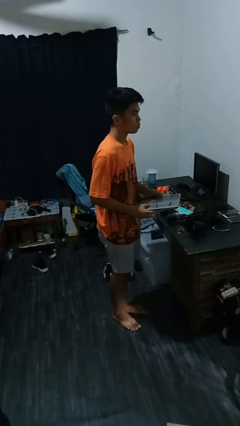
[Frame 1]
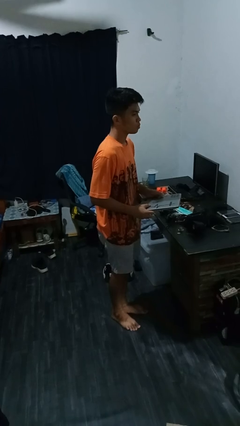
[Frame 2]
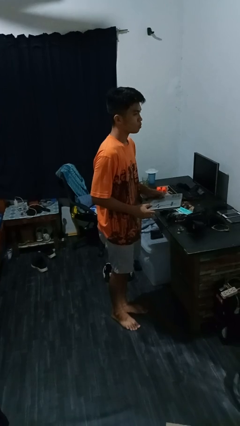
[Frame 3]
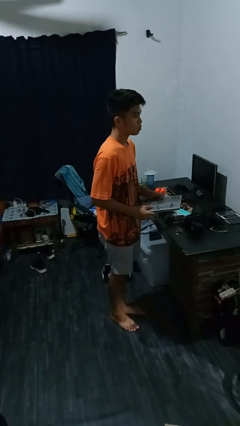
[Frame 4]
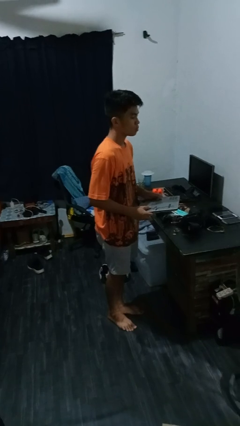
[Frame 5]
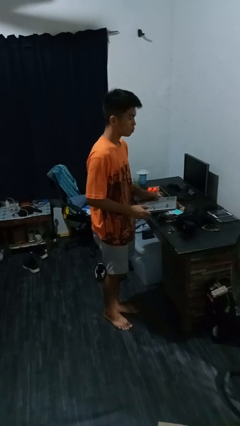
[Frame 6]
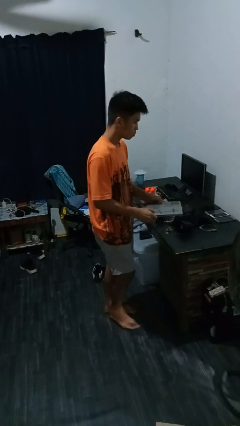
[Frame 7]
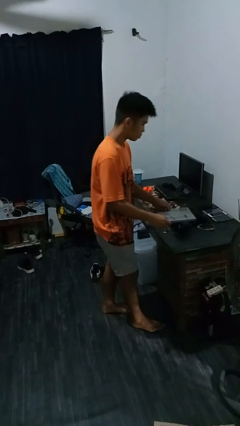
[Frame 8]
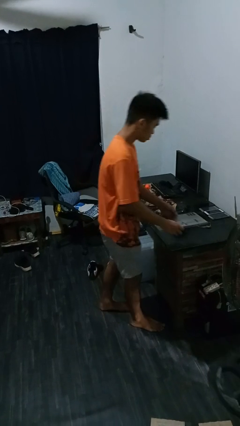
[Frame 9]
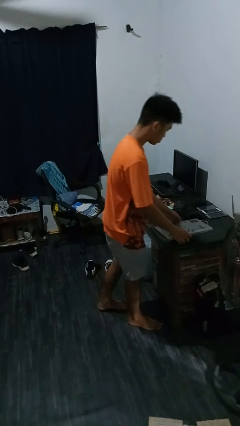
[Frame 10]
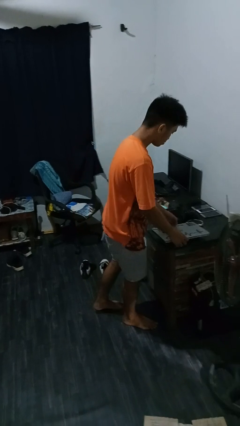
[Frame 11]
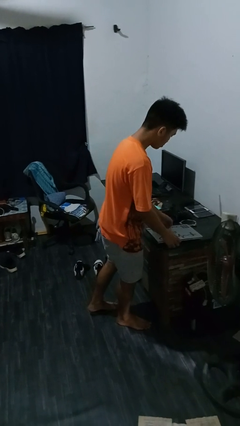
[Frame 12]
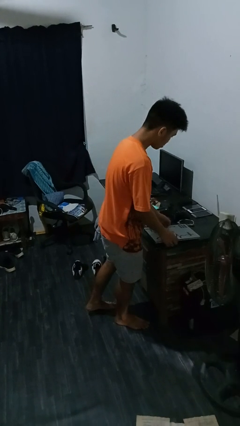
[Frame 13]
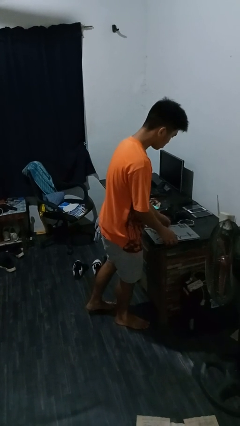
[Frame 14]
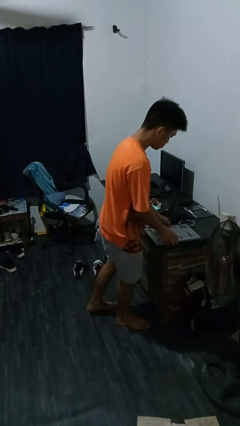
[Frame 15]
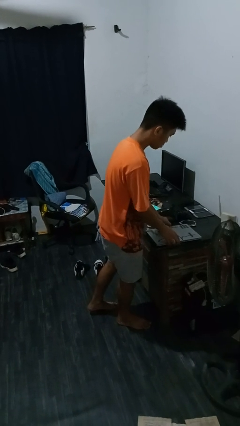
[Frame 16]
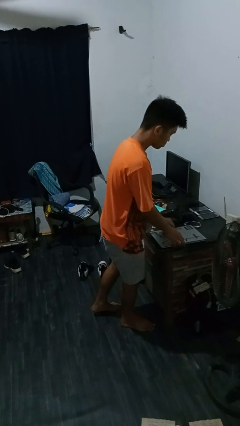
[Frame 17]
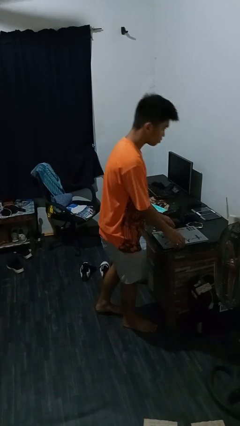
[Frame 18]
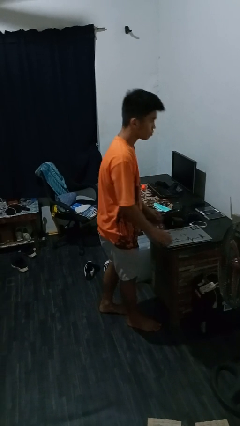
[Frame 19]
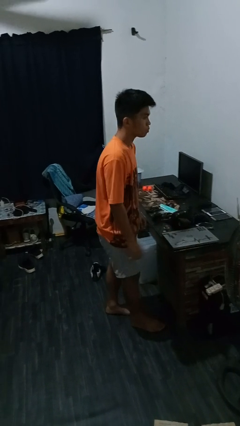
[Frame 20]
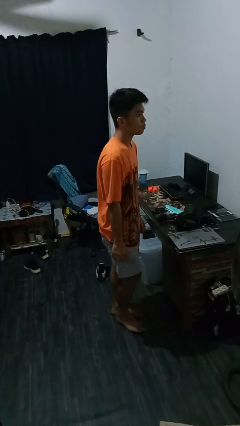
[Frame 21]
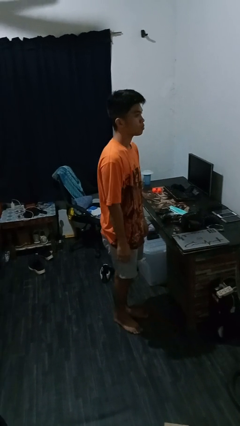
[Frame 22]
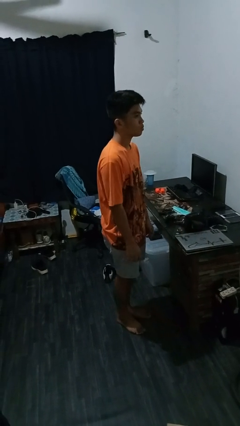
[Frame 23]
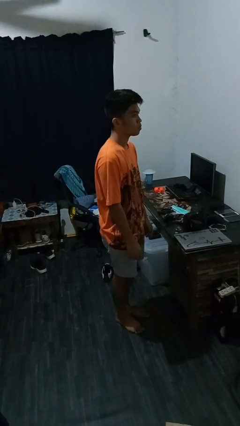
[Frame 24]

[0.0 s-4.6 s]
person puts down object on countertop

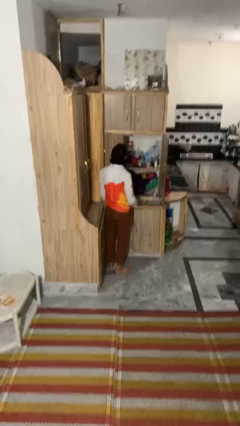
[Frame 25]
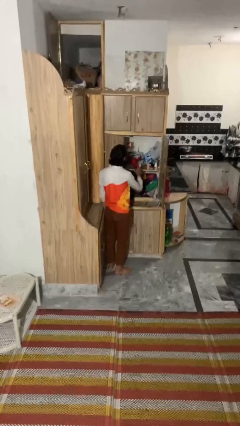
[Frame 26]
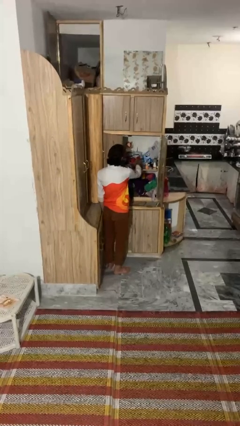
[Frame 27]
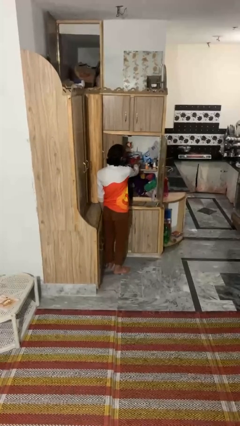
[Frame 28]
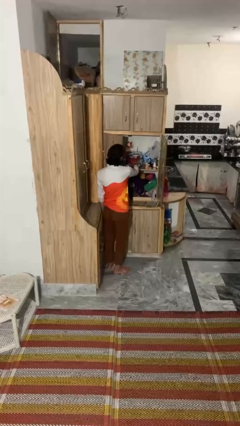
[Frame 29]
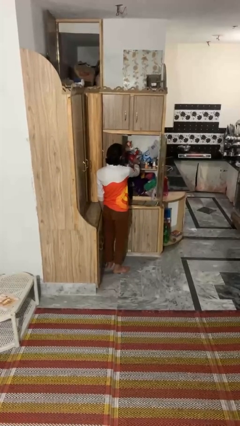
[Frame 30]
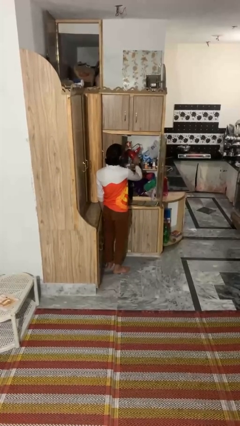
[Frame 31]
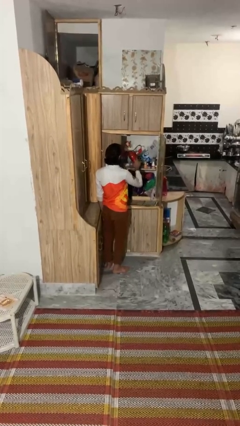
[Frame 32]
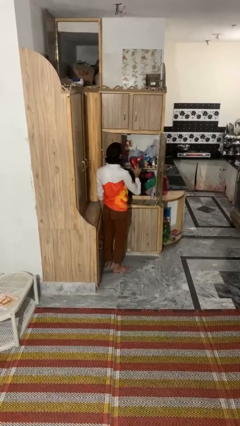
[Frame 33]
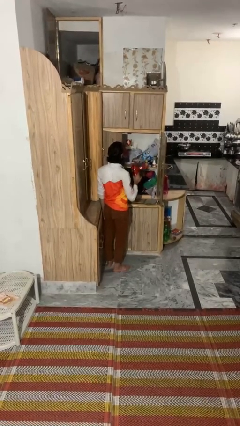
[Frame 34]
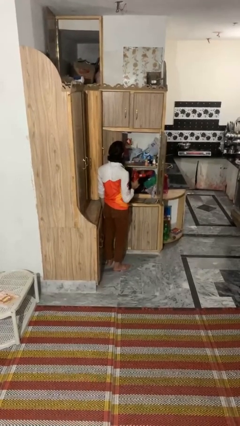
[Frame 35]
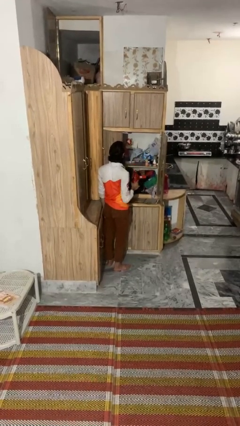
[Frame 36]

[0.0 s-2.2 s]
person picks up object from cabinet

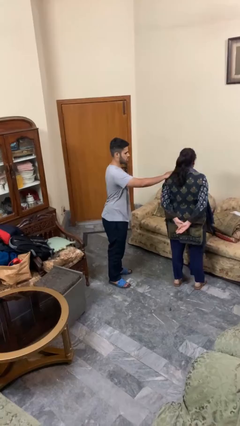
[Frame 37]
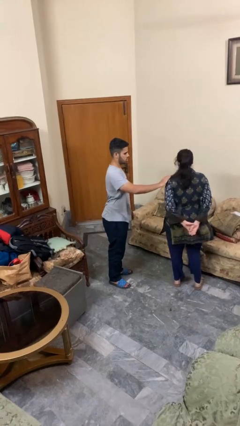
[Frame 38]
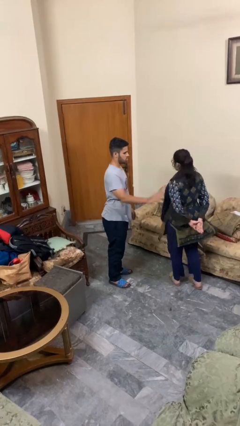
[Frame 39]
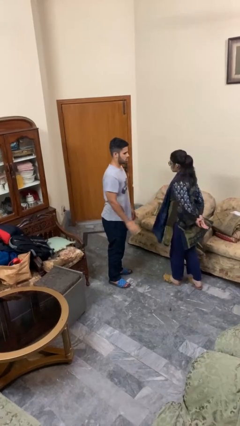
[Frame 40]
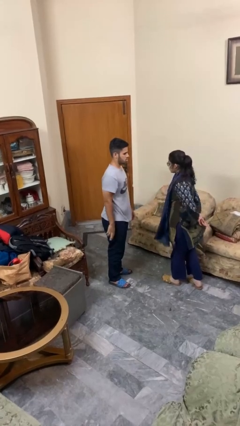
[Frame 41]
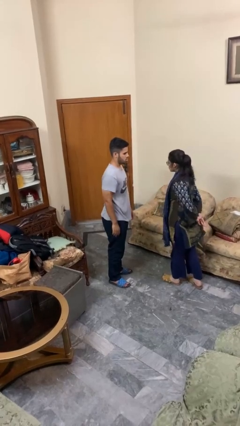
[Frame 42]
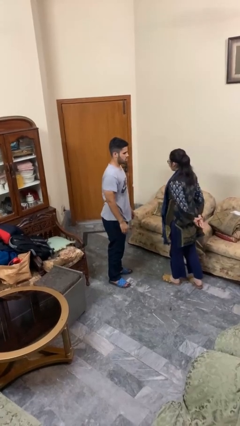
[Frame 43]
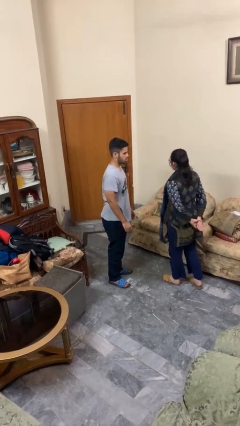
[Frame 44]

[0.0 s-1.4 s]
person spins person around

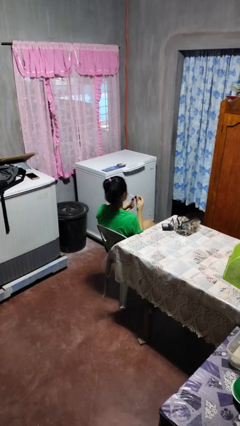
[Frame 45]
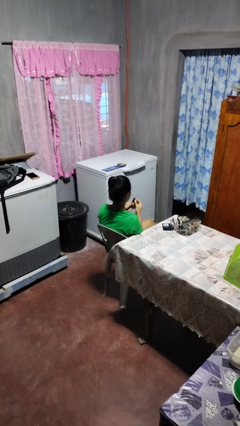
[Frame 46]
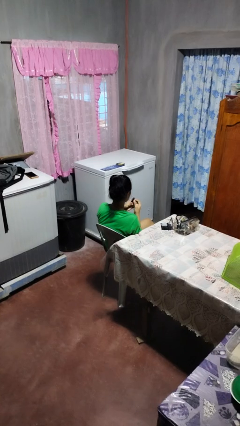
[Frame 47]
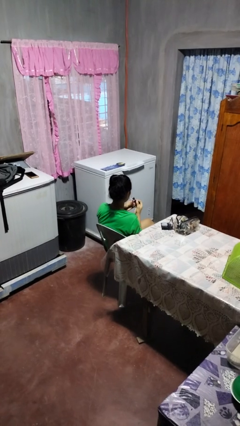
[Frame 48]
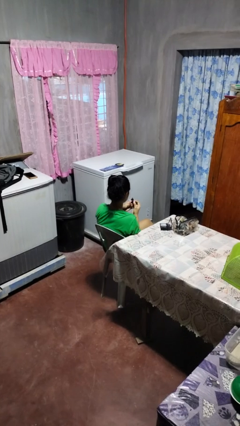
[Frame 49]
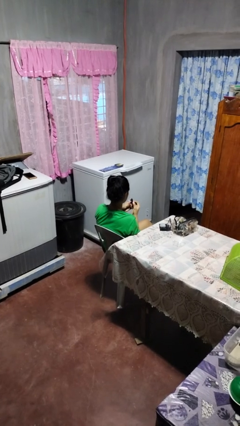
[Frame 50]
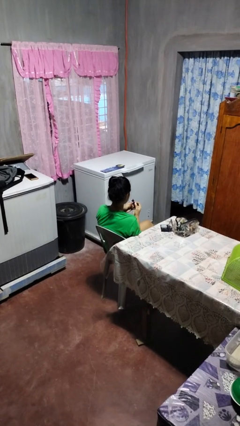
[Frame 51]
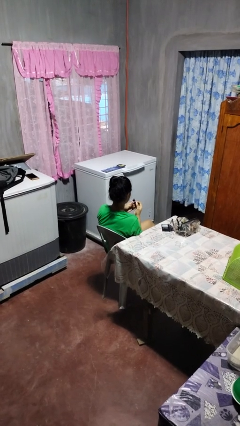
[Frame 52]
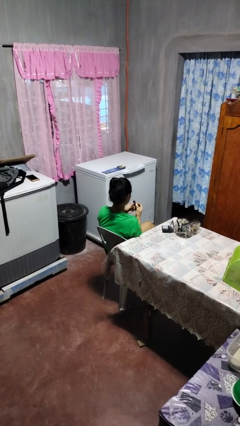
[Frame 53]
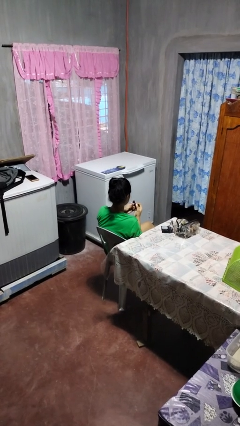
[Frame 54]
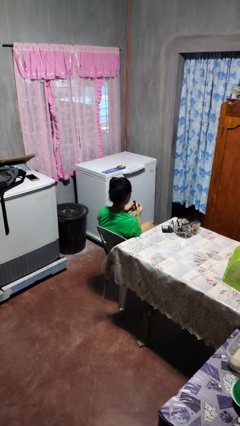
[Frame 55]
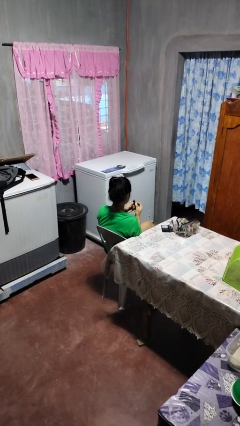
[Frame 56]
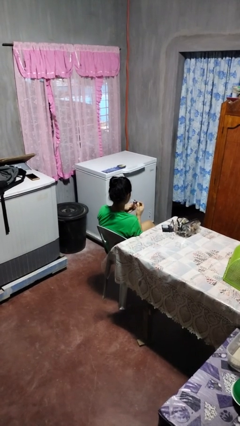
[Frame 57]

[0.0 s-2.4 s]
person applies lip makeup

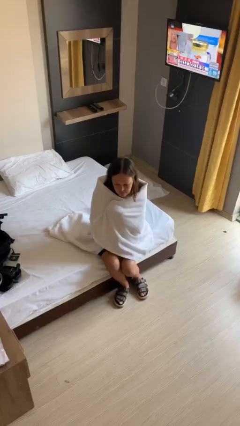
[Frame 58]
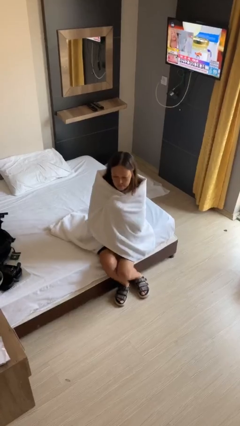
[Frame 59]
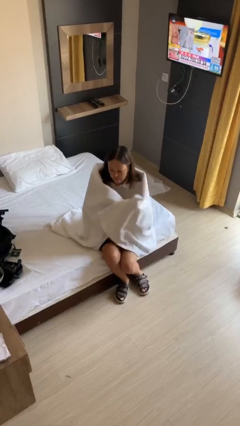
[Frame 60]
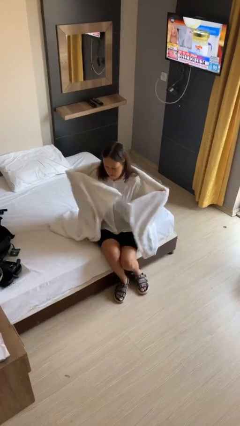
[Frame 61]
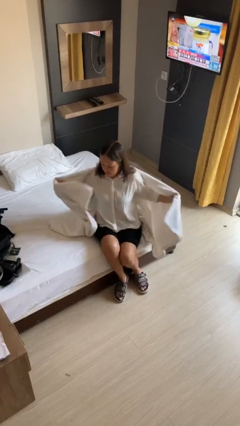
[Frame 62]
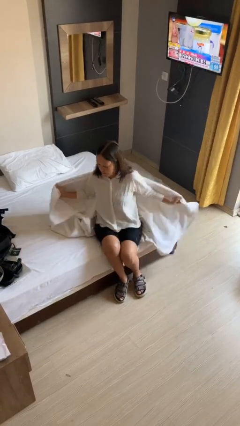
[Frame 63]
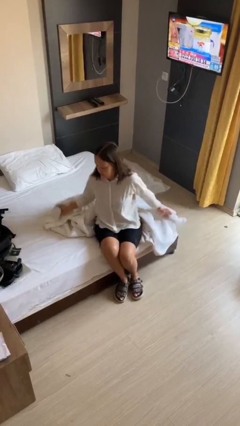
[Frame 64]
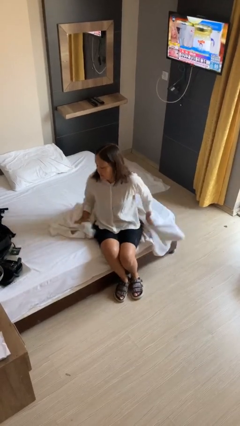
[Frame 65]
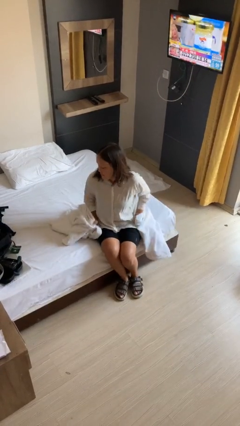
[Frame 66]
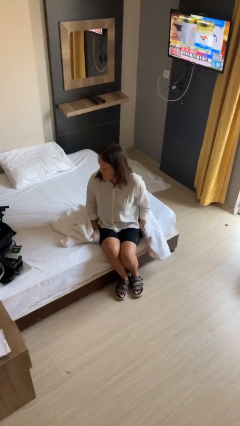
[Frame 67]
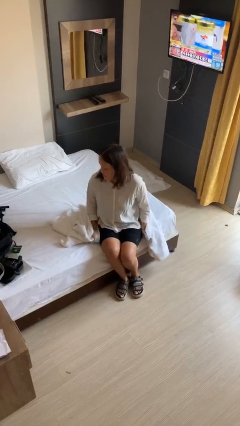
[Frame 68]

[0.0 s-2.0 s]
person uncovers with blanket

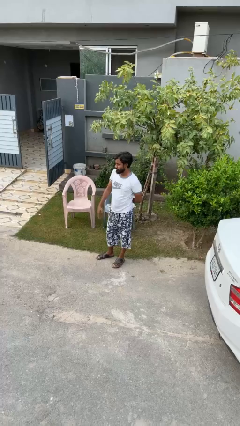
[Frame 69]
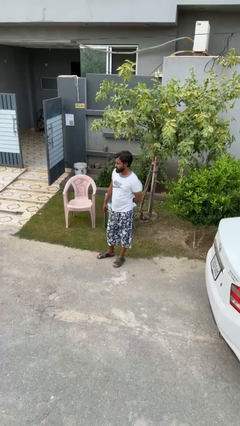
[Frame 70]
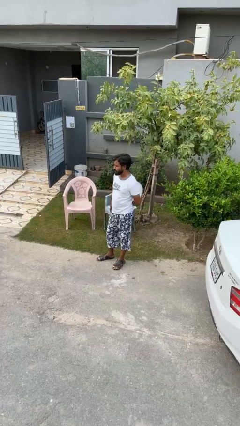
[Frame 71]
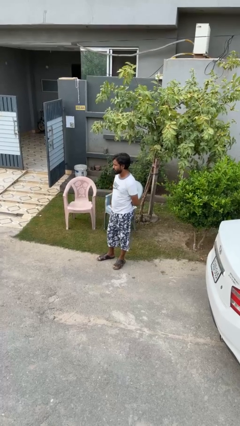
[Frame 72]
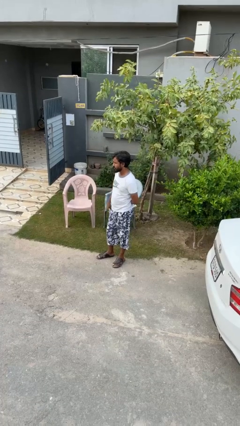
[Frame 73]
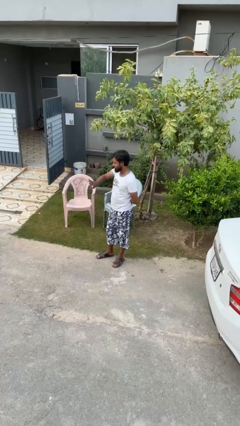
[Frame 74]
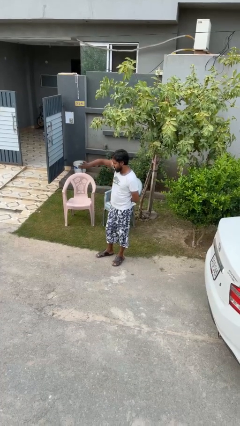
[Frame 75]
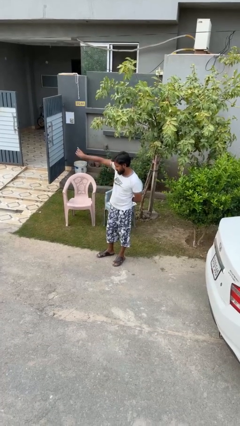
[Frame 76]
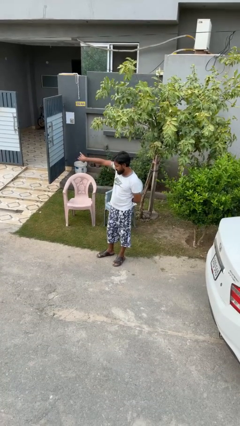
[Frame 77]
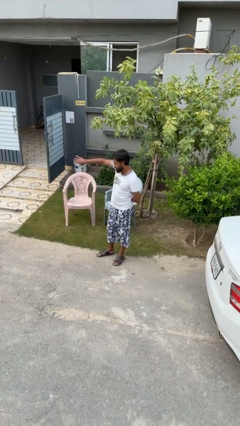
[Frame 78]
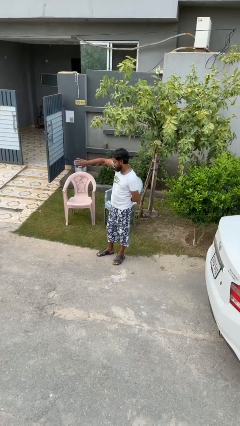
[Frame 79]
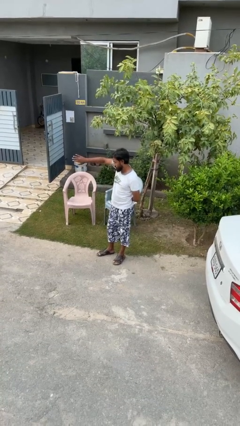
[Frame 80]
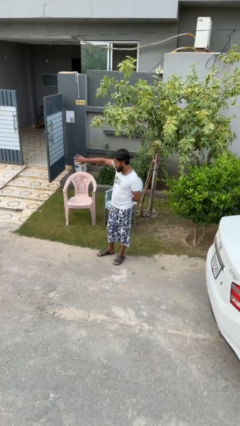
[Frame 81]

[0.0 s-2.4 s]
person gestures swipe right

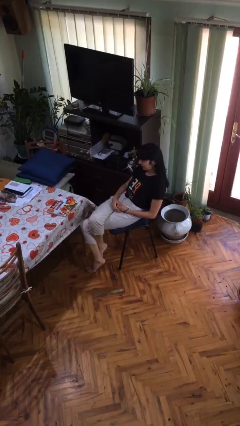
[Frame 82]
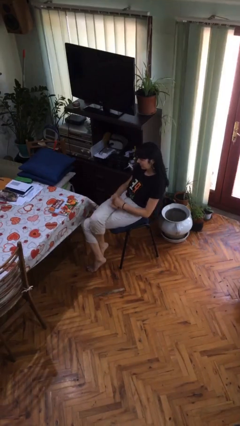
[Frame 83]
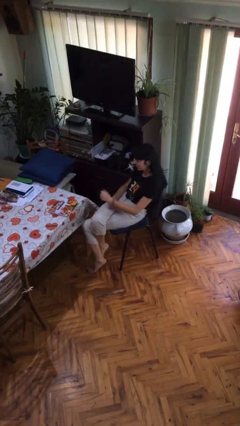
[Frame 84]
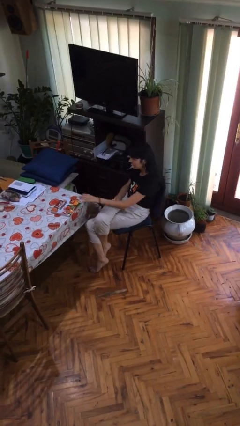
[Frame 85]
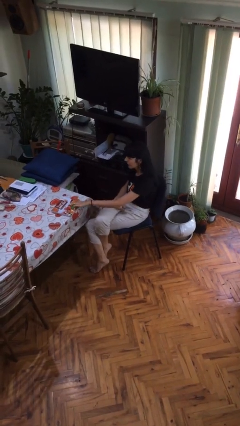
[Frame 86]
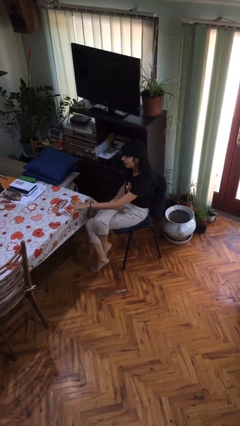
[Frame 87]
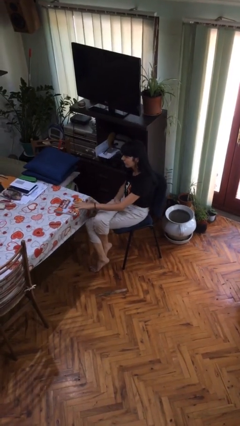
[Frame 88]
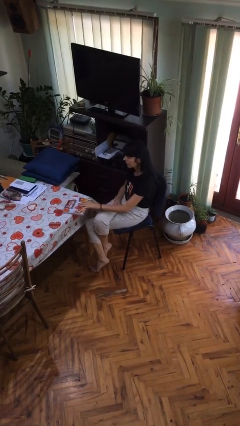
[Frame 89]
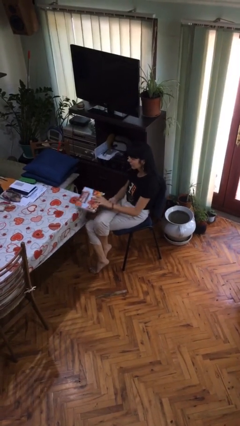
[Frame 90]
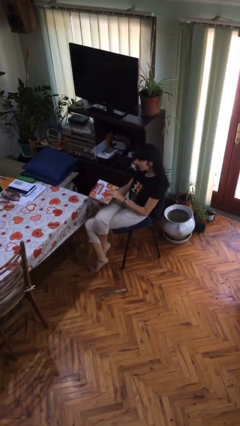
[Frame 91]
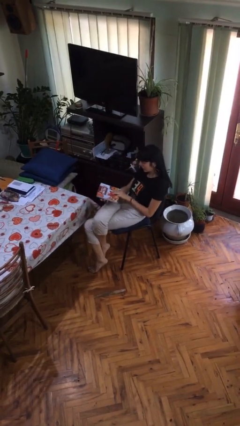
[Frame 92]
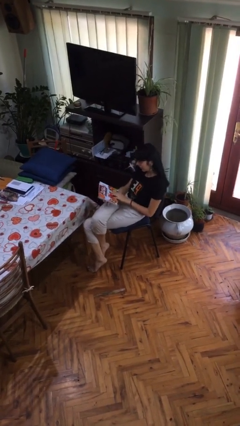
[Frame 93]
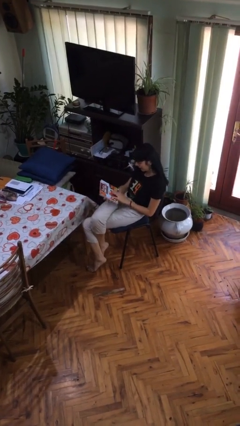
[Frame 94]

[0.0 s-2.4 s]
person picks up object from table
